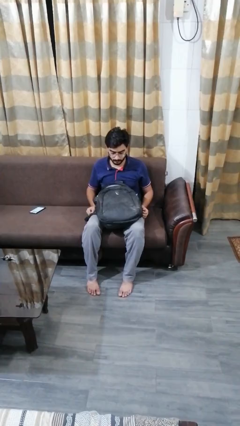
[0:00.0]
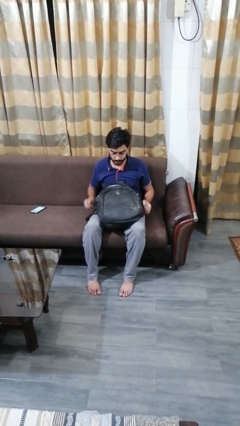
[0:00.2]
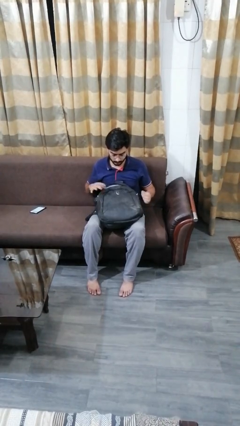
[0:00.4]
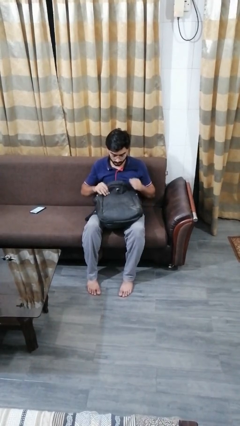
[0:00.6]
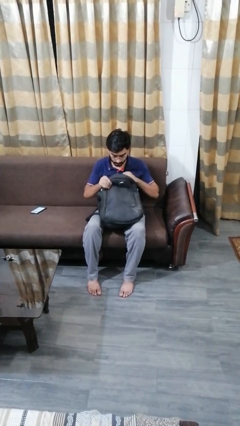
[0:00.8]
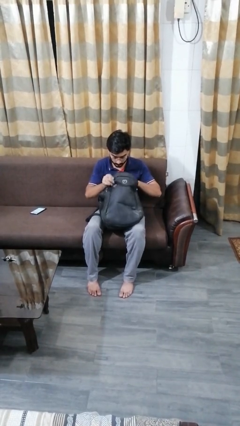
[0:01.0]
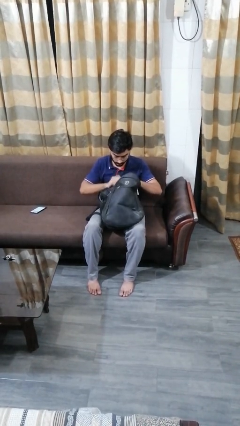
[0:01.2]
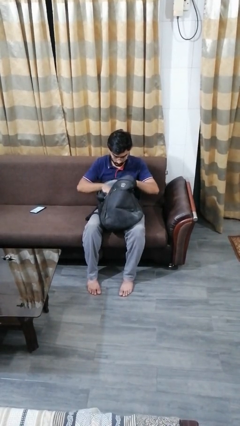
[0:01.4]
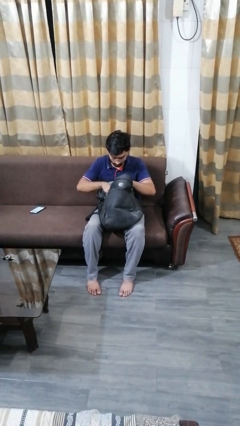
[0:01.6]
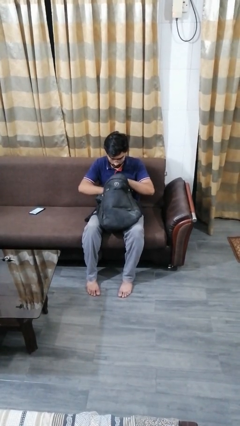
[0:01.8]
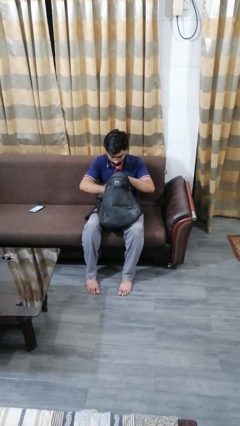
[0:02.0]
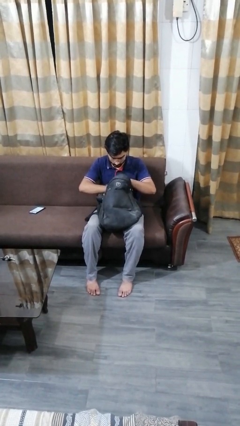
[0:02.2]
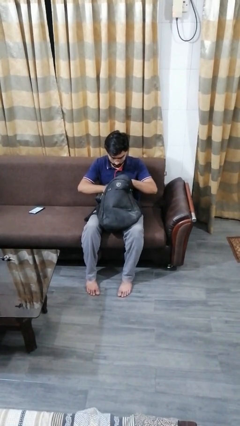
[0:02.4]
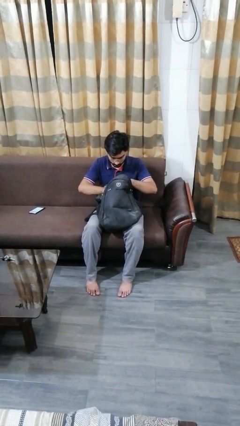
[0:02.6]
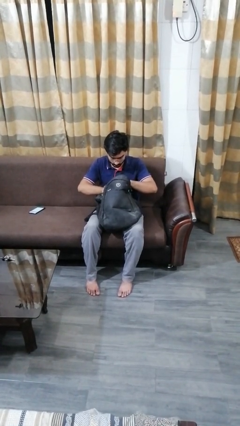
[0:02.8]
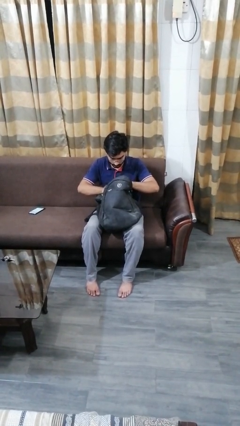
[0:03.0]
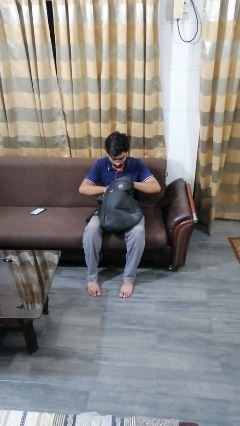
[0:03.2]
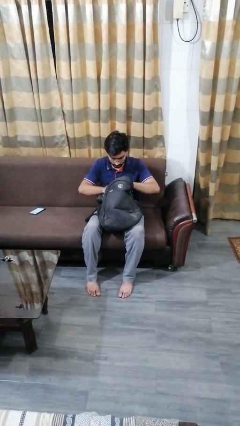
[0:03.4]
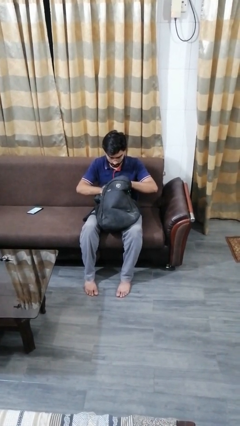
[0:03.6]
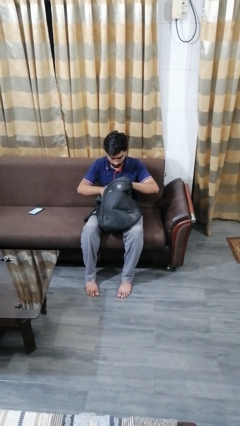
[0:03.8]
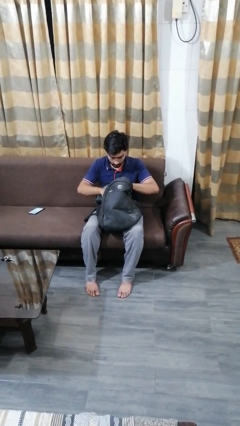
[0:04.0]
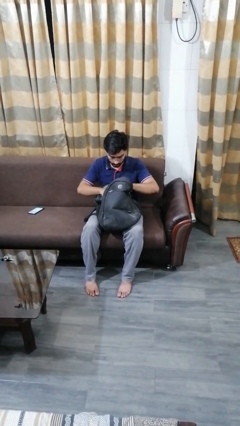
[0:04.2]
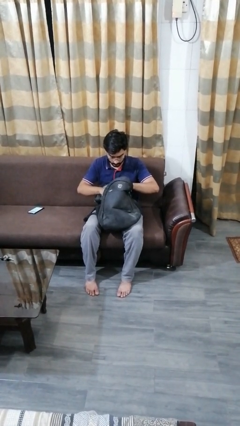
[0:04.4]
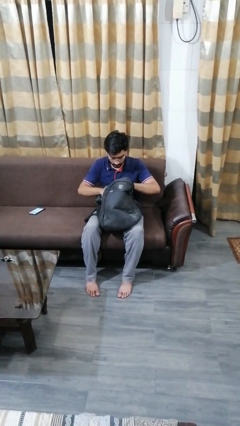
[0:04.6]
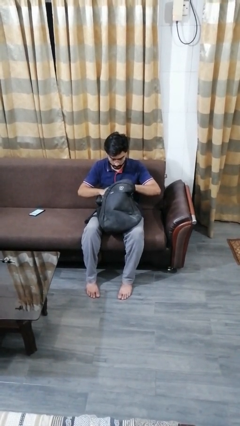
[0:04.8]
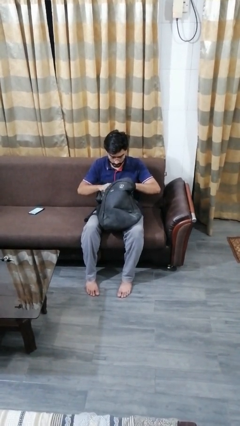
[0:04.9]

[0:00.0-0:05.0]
person searches in backpack

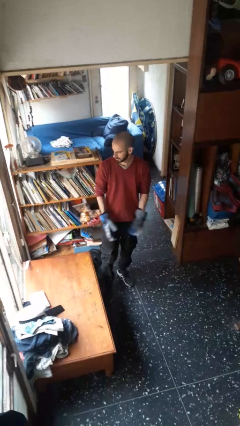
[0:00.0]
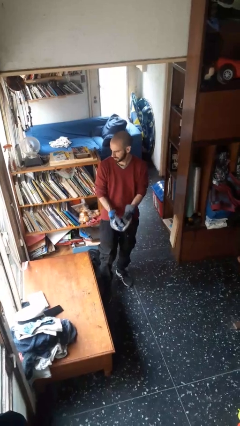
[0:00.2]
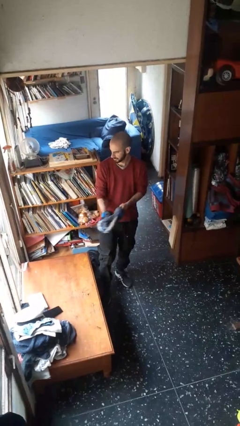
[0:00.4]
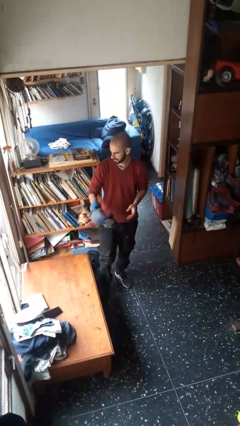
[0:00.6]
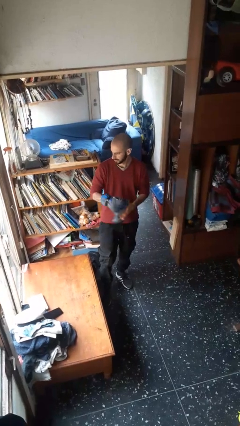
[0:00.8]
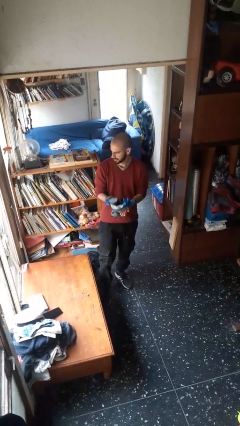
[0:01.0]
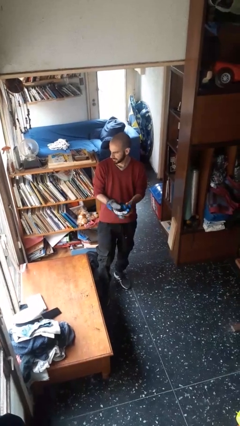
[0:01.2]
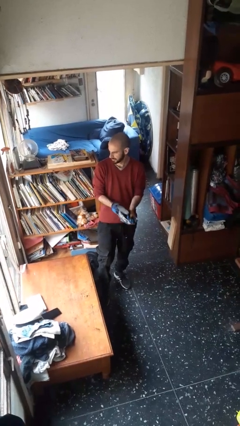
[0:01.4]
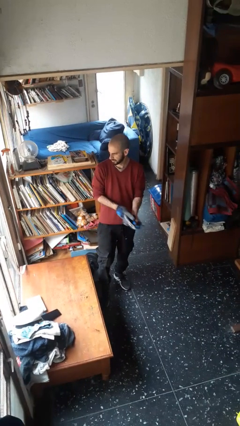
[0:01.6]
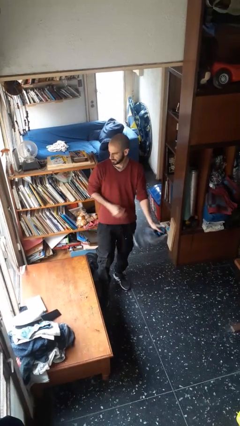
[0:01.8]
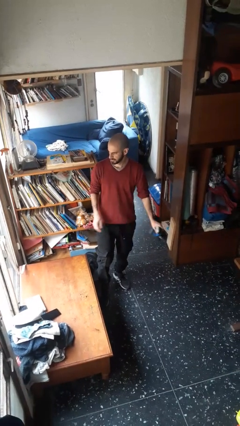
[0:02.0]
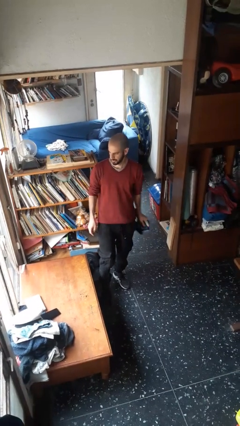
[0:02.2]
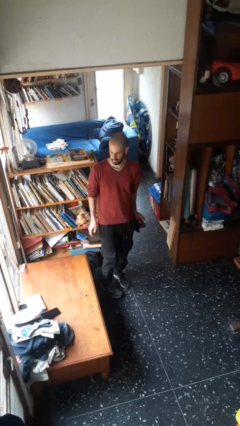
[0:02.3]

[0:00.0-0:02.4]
person takes off gloves

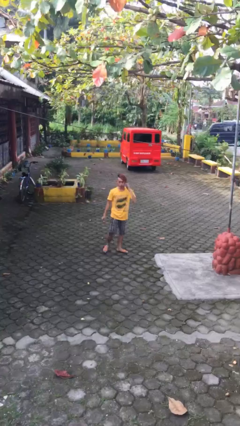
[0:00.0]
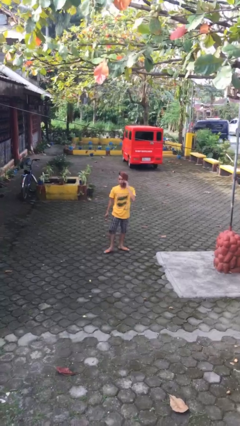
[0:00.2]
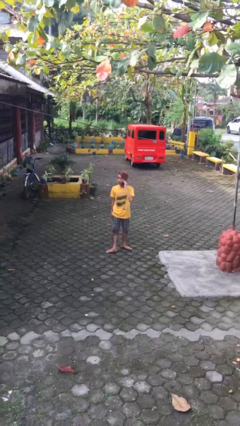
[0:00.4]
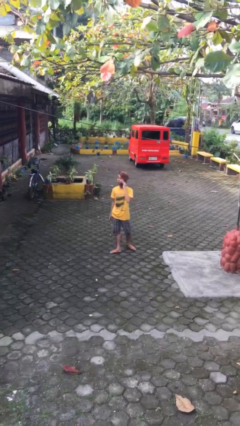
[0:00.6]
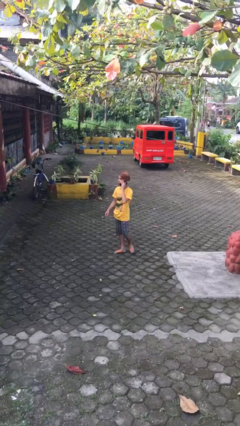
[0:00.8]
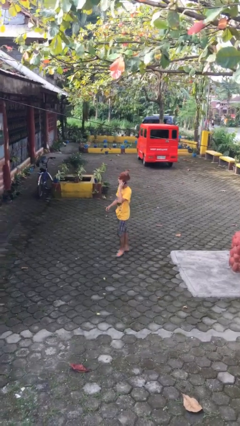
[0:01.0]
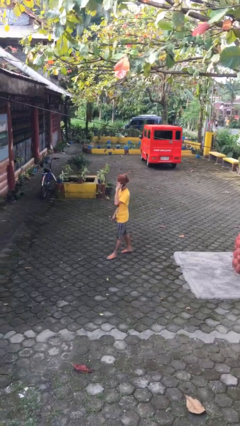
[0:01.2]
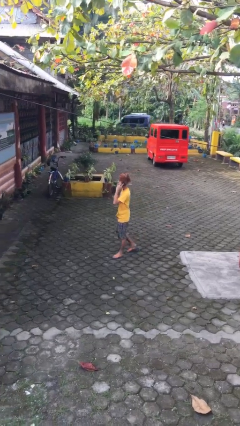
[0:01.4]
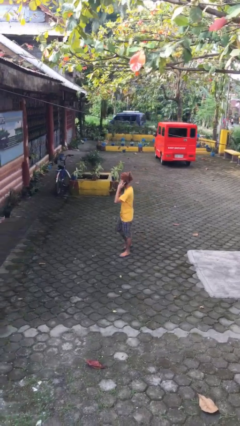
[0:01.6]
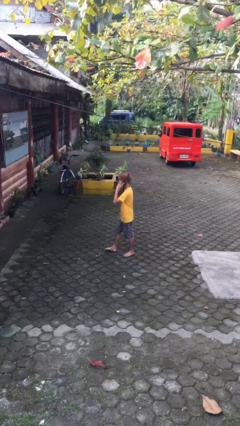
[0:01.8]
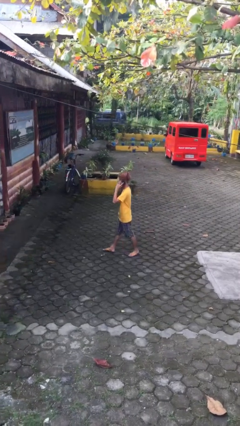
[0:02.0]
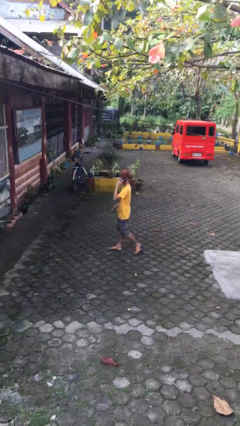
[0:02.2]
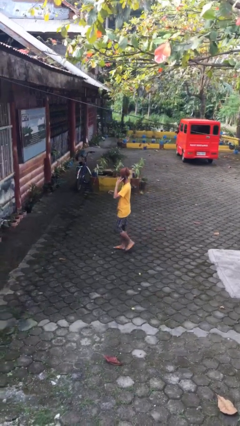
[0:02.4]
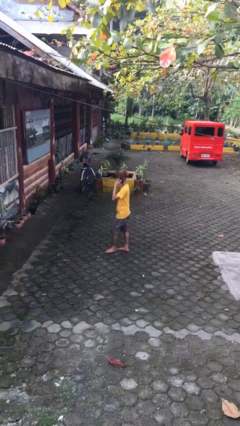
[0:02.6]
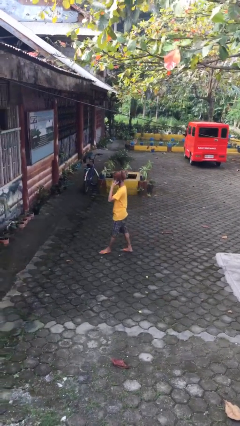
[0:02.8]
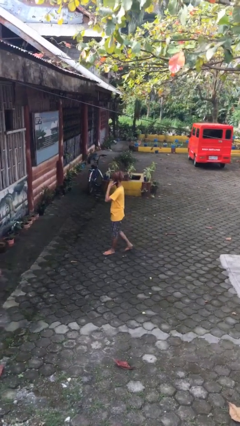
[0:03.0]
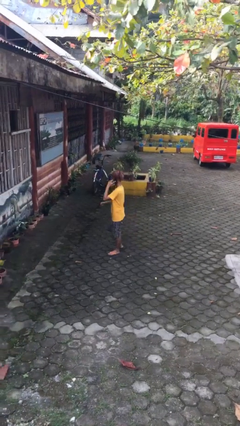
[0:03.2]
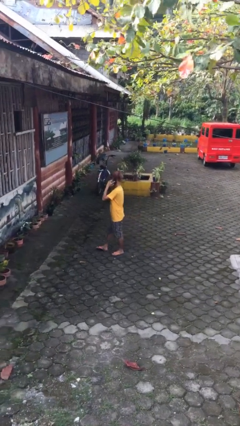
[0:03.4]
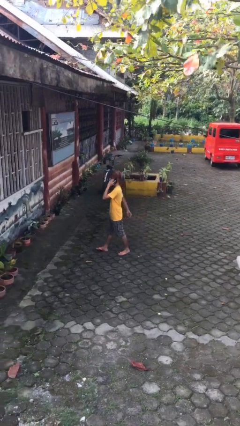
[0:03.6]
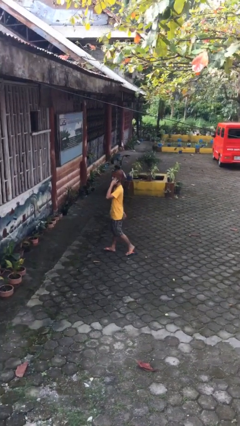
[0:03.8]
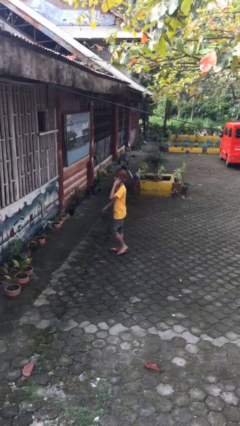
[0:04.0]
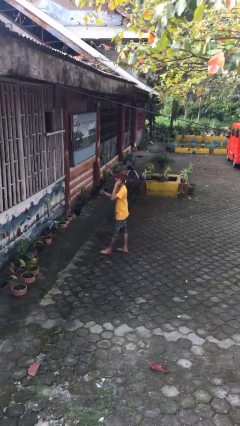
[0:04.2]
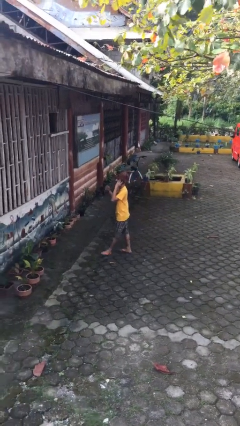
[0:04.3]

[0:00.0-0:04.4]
person talks on phone

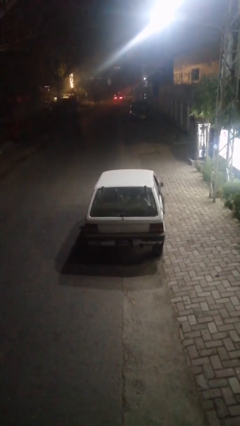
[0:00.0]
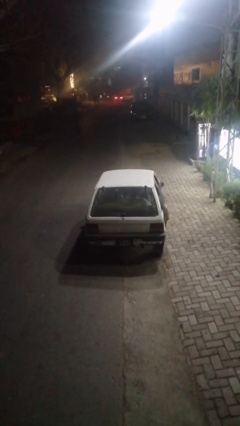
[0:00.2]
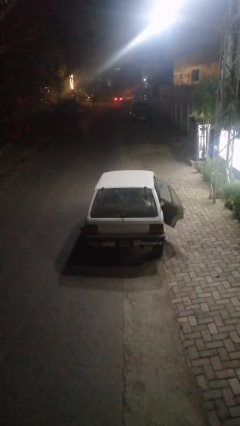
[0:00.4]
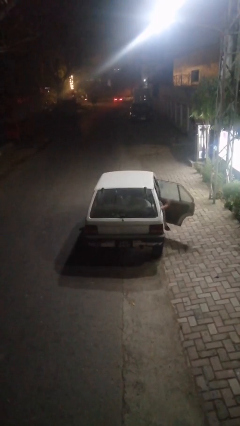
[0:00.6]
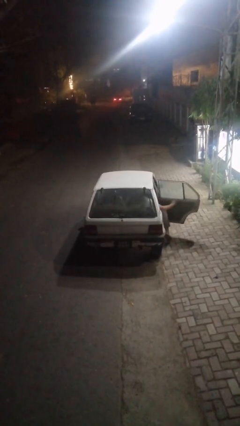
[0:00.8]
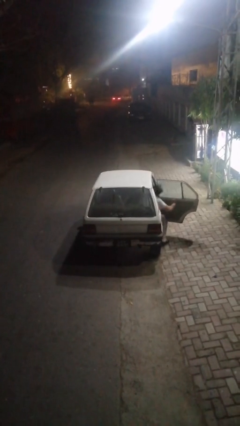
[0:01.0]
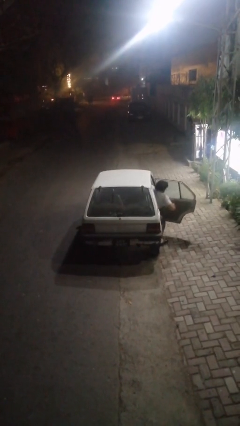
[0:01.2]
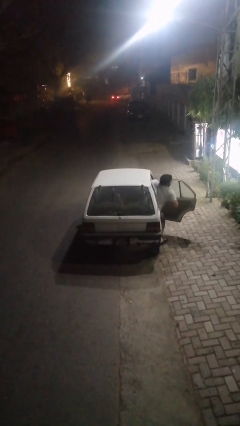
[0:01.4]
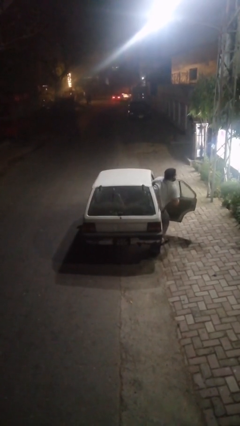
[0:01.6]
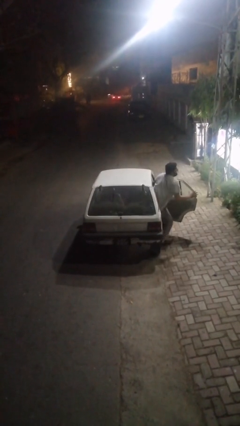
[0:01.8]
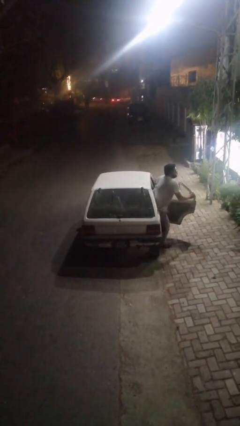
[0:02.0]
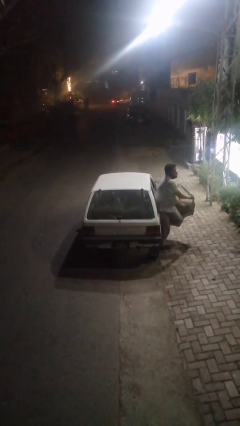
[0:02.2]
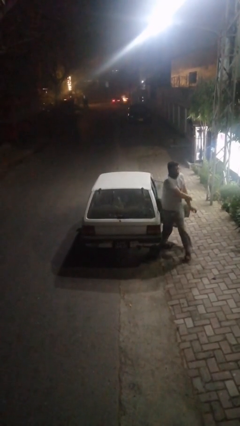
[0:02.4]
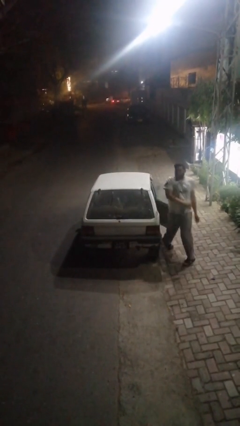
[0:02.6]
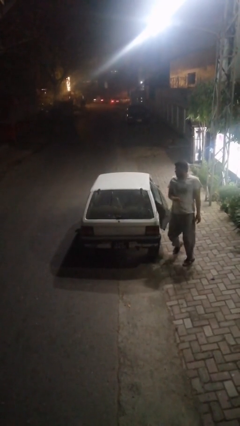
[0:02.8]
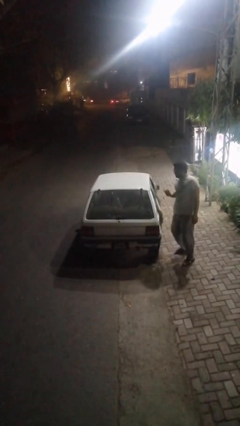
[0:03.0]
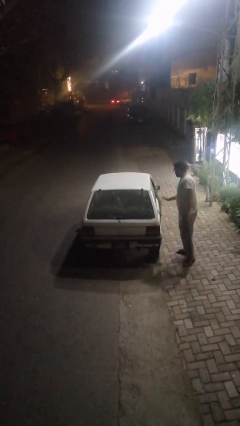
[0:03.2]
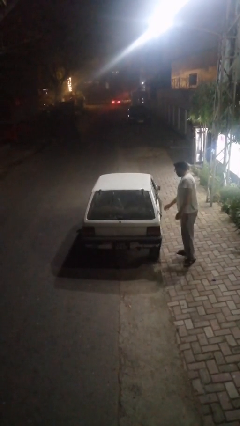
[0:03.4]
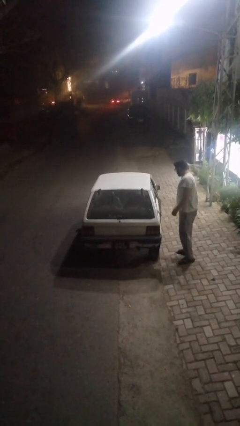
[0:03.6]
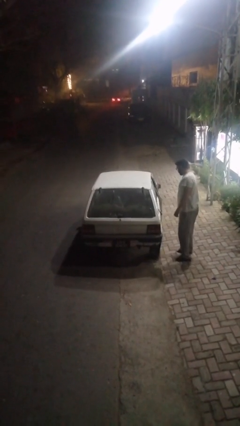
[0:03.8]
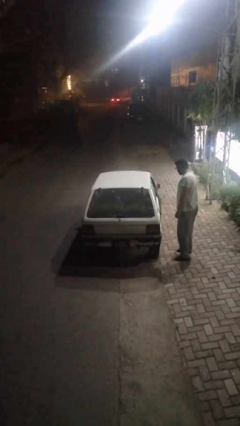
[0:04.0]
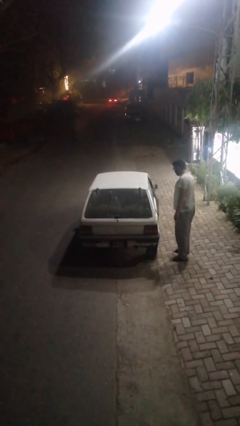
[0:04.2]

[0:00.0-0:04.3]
car drops off person

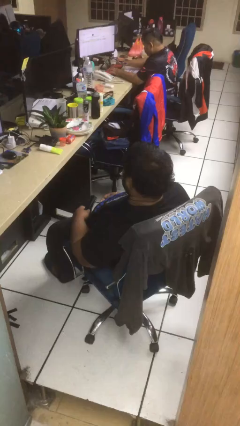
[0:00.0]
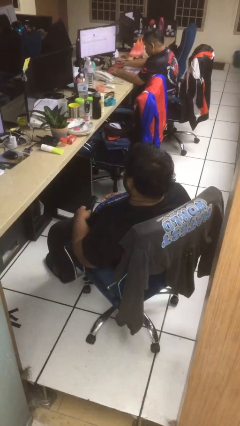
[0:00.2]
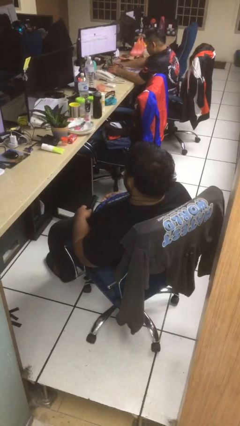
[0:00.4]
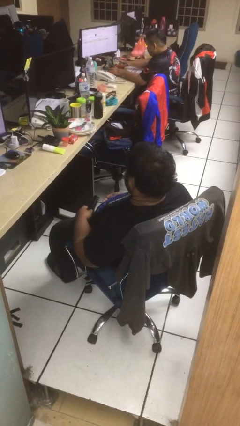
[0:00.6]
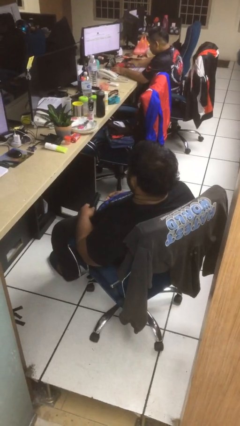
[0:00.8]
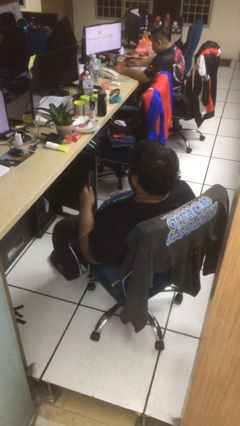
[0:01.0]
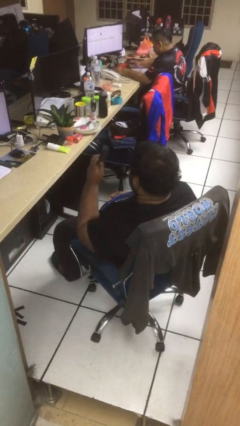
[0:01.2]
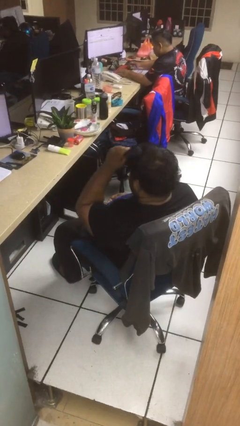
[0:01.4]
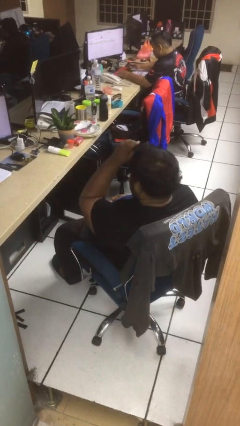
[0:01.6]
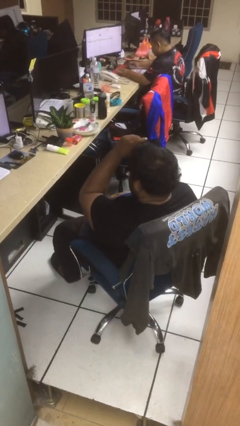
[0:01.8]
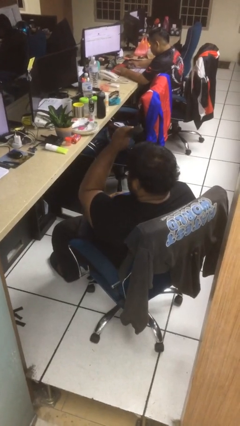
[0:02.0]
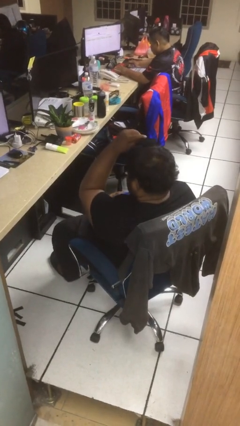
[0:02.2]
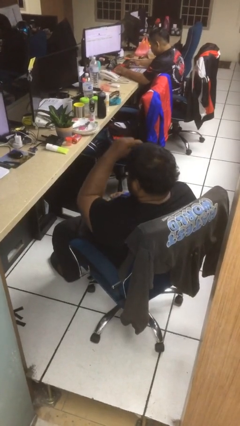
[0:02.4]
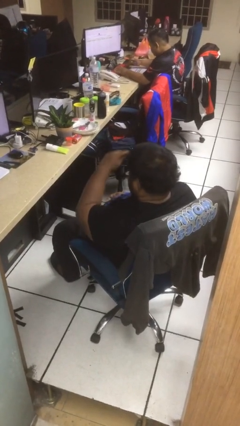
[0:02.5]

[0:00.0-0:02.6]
person brushes hair
